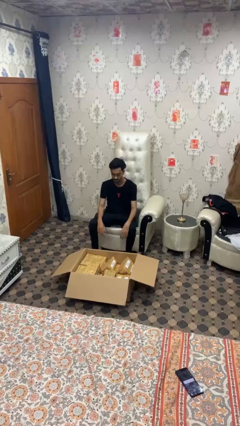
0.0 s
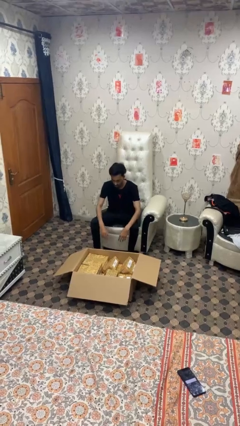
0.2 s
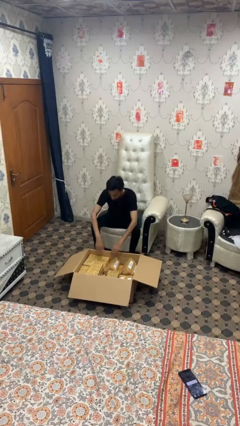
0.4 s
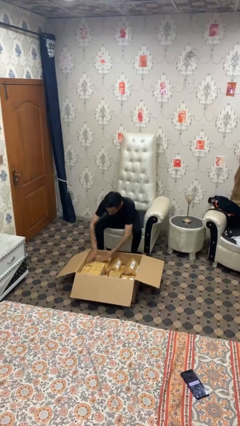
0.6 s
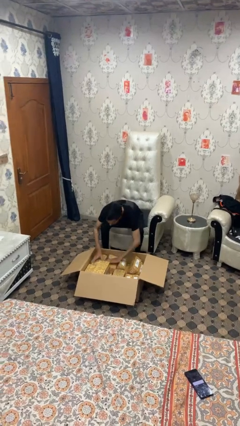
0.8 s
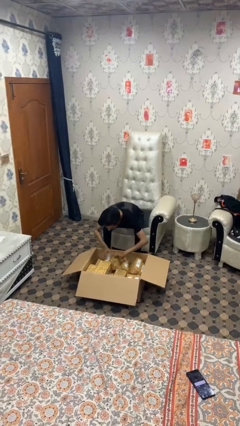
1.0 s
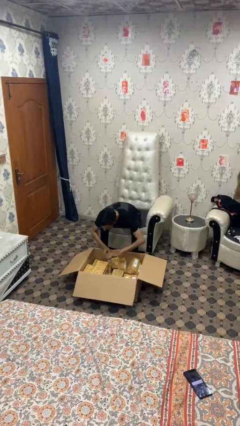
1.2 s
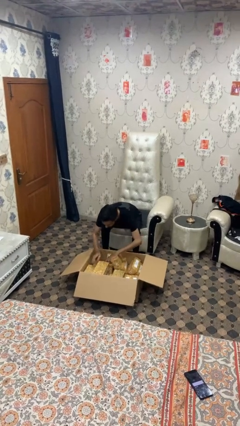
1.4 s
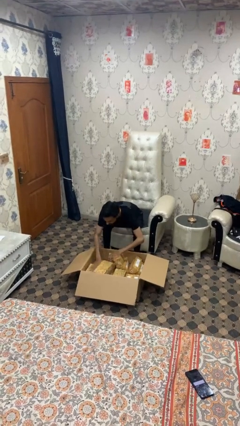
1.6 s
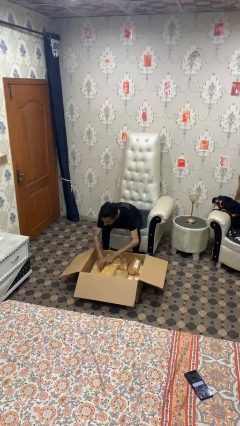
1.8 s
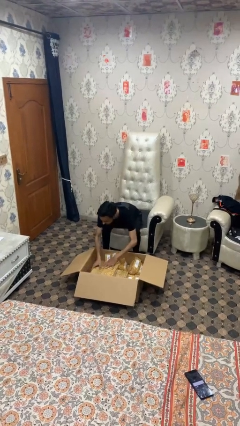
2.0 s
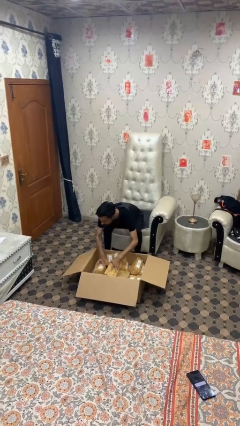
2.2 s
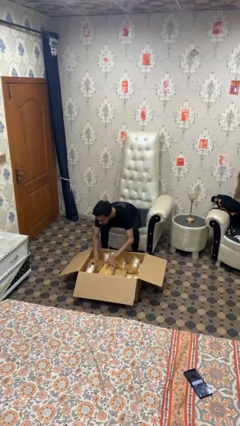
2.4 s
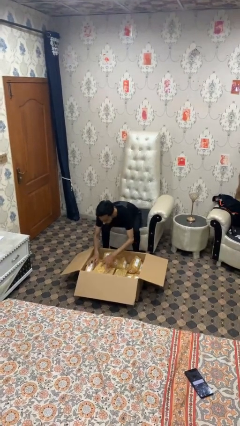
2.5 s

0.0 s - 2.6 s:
person searches in box

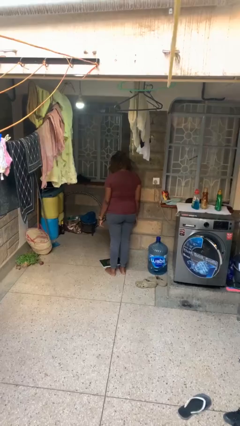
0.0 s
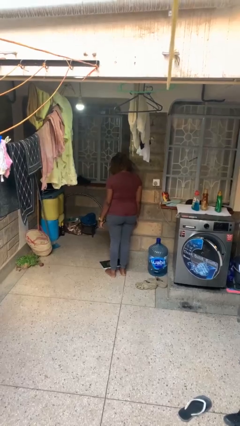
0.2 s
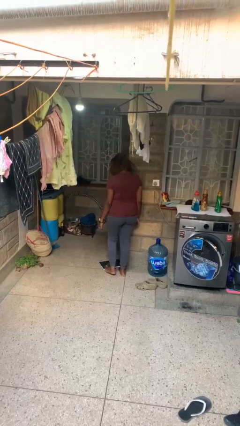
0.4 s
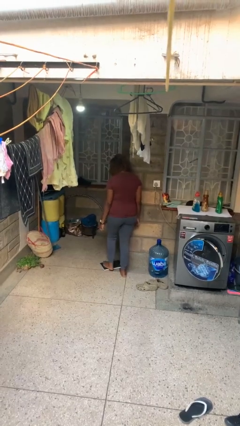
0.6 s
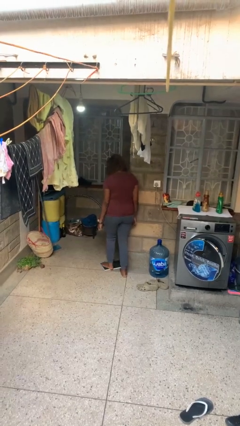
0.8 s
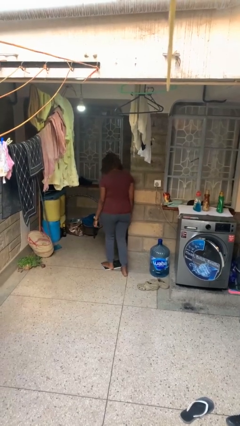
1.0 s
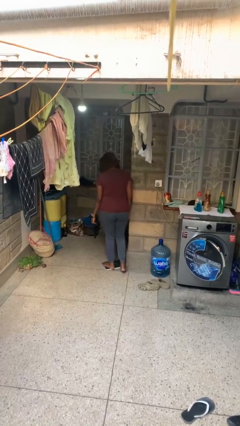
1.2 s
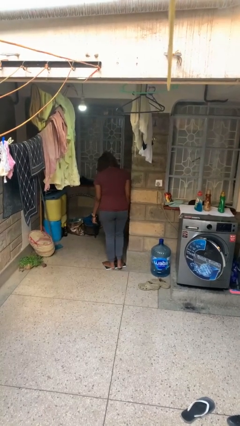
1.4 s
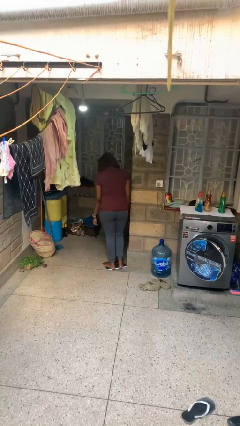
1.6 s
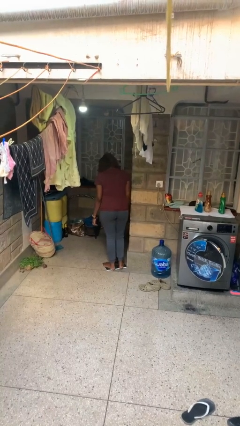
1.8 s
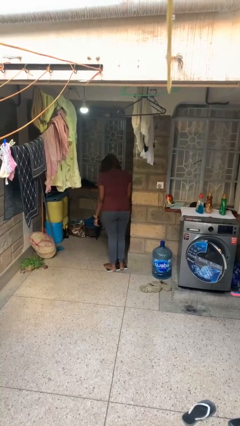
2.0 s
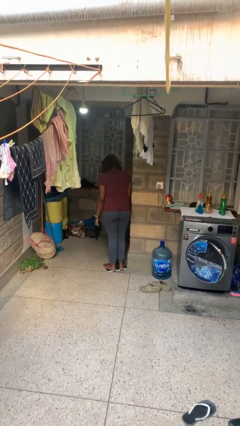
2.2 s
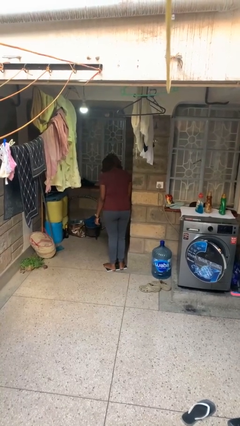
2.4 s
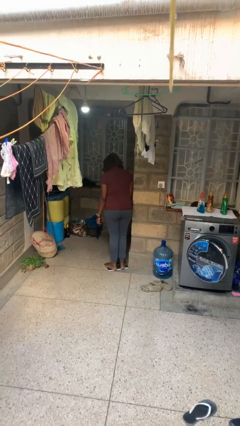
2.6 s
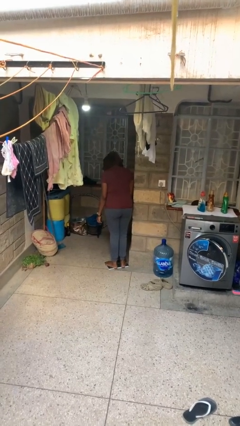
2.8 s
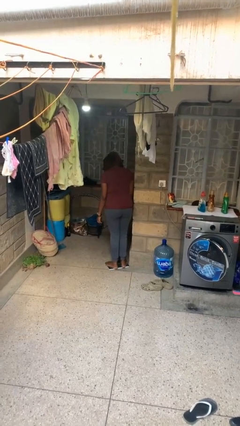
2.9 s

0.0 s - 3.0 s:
person uses bodyweight scale

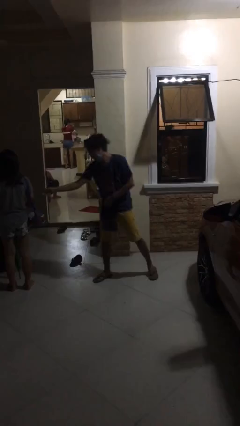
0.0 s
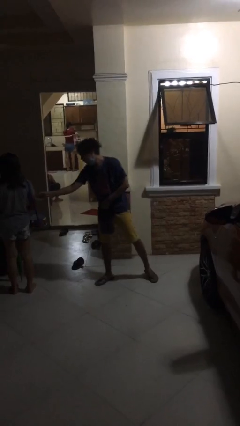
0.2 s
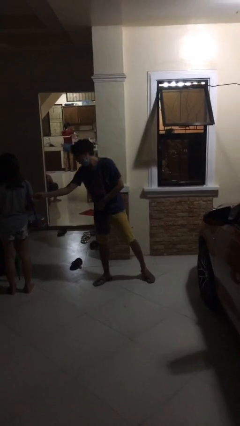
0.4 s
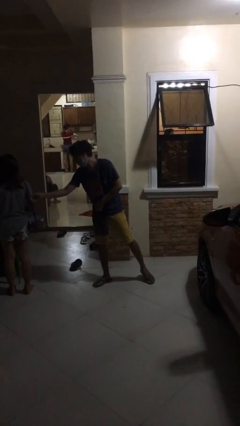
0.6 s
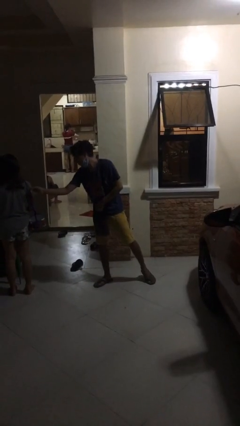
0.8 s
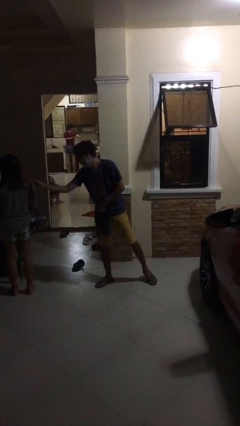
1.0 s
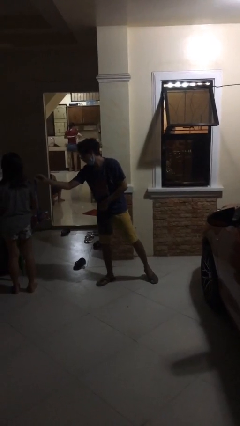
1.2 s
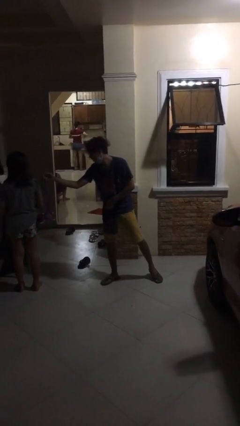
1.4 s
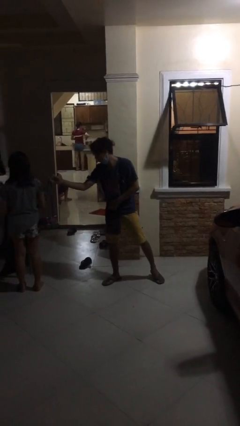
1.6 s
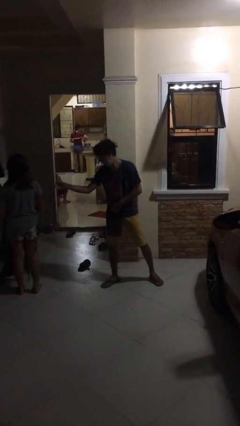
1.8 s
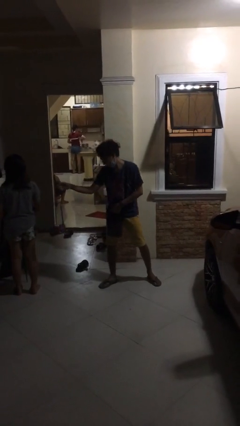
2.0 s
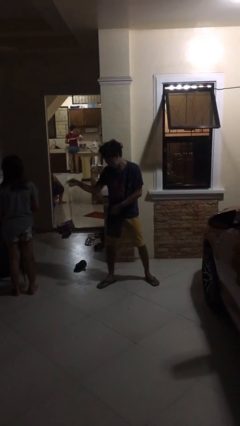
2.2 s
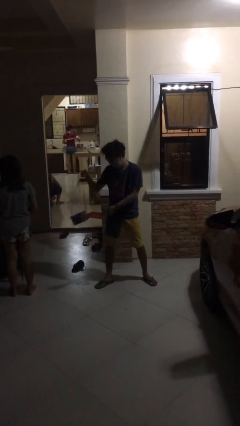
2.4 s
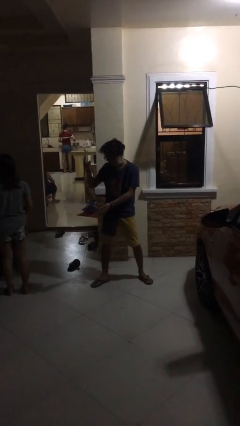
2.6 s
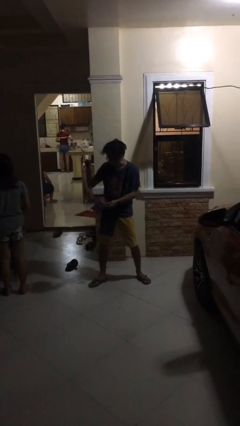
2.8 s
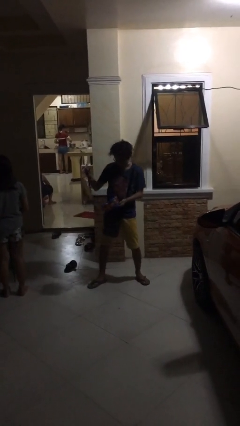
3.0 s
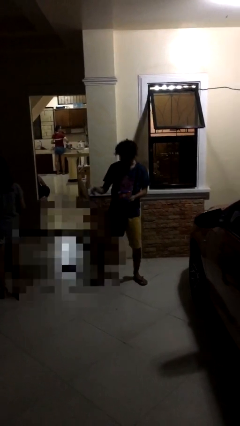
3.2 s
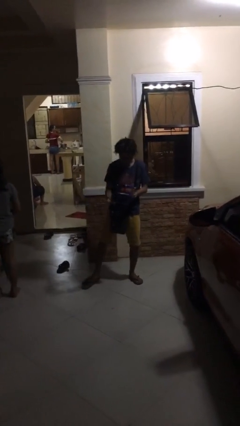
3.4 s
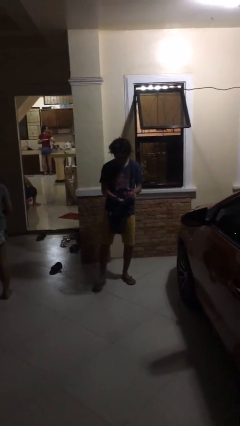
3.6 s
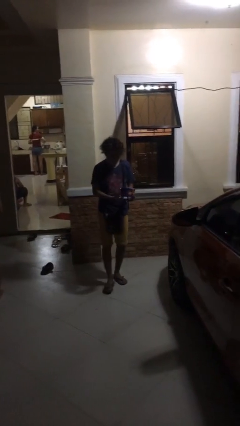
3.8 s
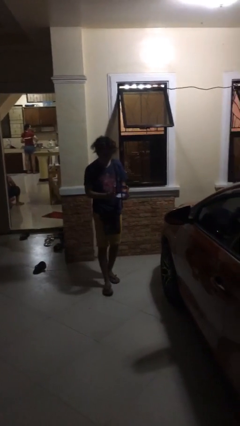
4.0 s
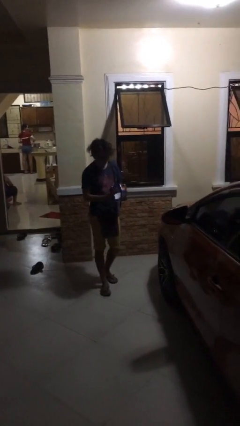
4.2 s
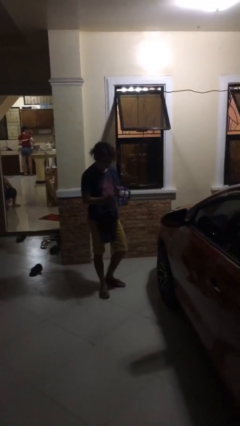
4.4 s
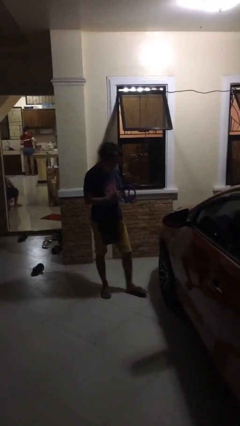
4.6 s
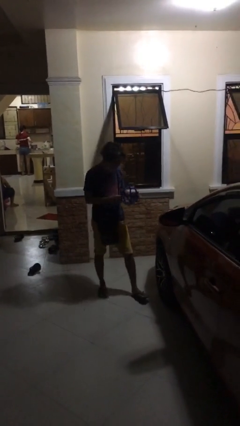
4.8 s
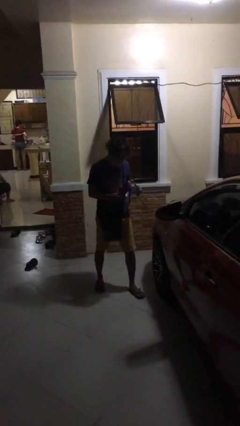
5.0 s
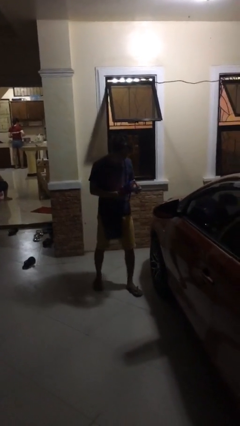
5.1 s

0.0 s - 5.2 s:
person steals object from person

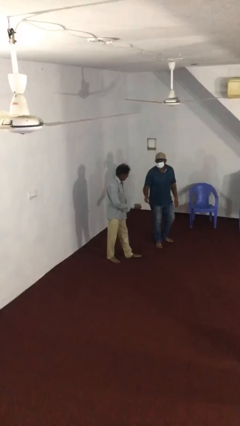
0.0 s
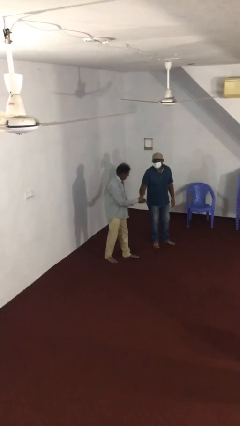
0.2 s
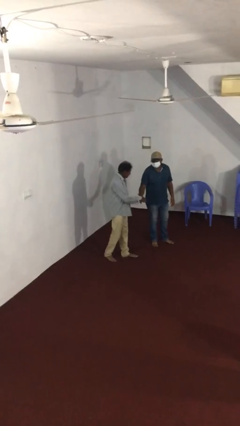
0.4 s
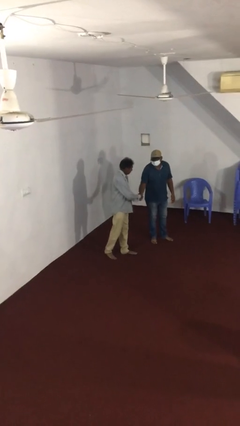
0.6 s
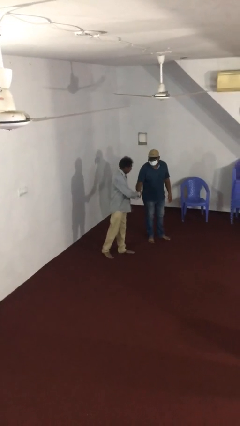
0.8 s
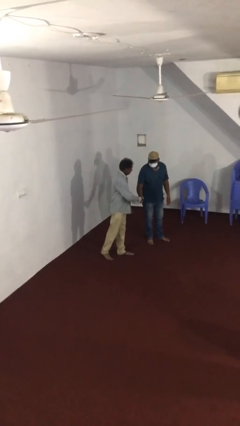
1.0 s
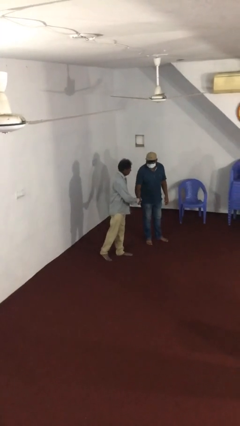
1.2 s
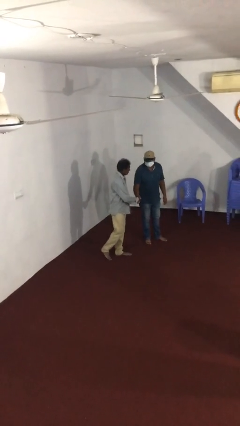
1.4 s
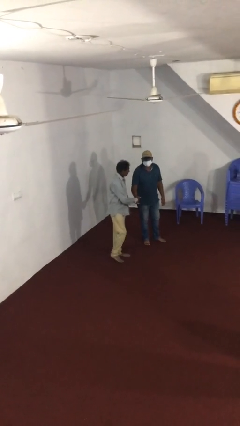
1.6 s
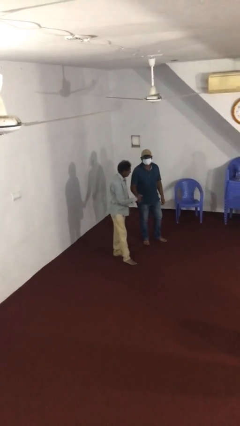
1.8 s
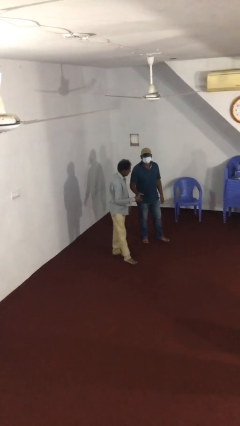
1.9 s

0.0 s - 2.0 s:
person shakes hand

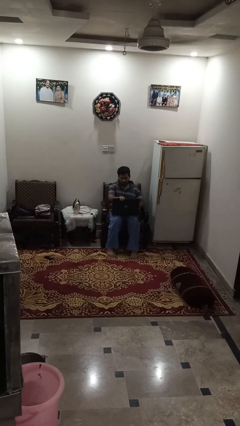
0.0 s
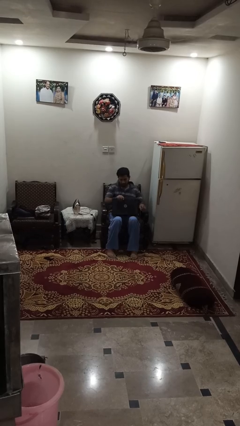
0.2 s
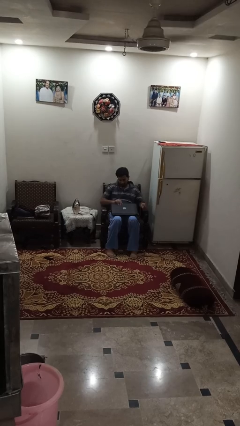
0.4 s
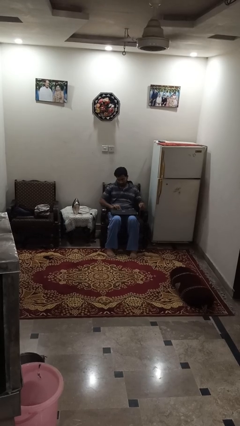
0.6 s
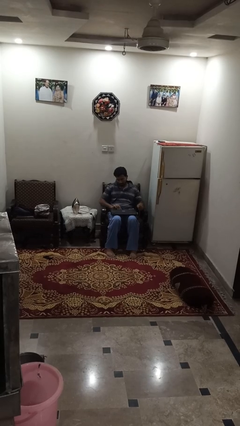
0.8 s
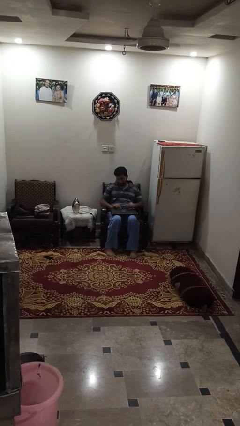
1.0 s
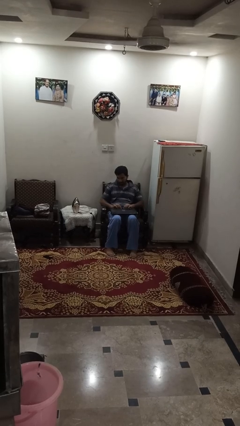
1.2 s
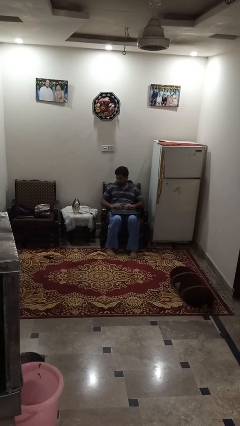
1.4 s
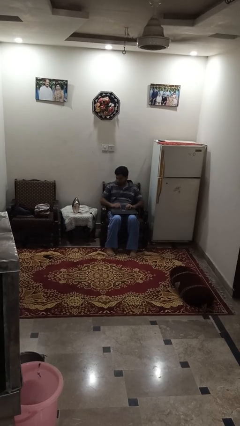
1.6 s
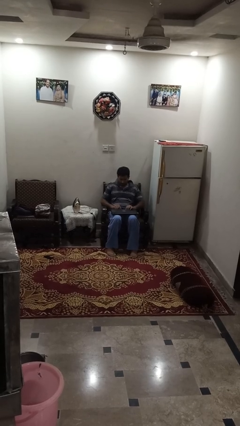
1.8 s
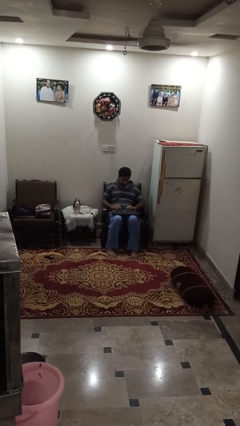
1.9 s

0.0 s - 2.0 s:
person closes laptop

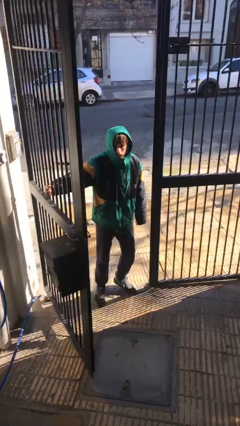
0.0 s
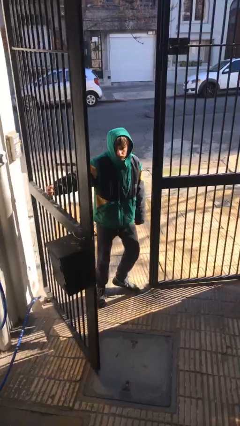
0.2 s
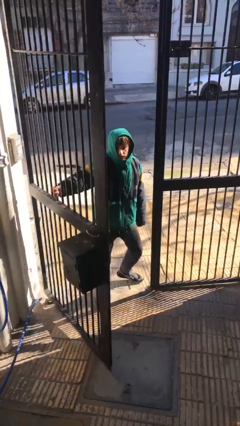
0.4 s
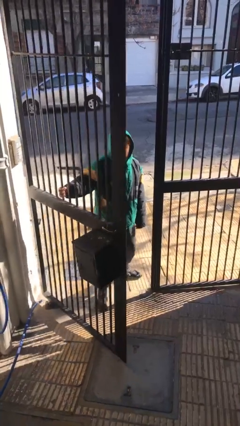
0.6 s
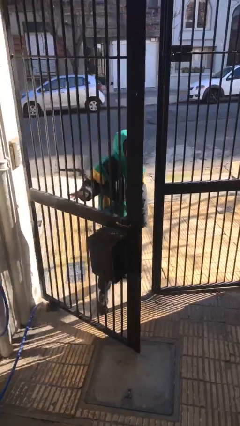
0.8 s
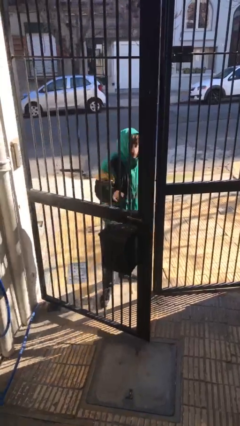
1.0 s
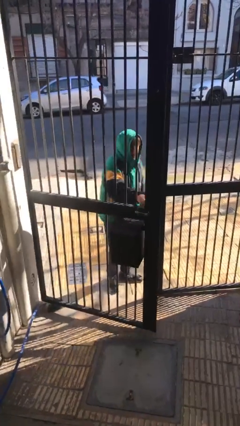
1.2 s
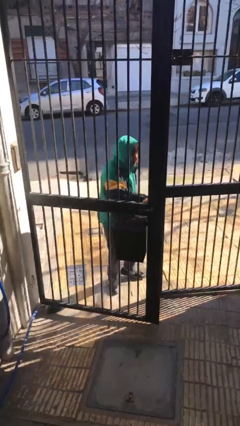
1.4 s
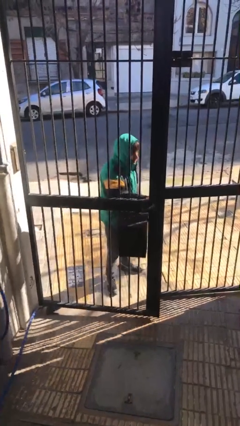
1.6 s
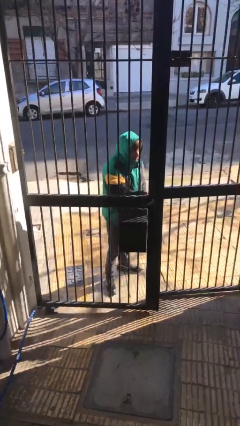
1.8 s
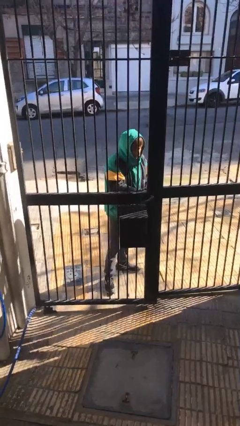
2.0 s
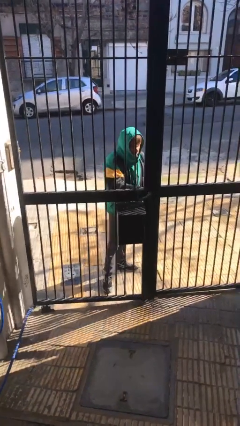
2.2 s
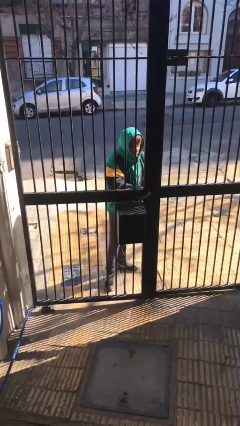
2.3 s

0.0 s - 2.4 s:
person closes gate

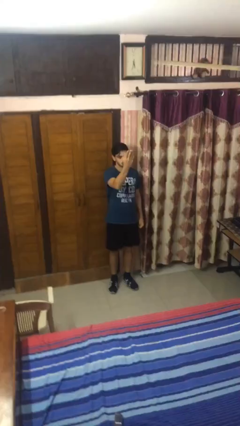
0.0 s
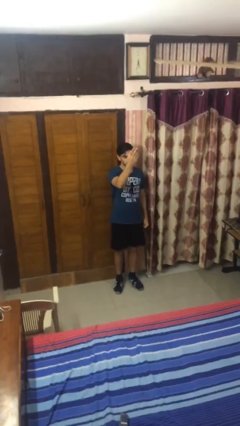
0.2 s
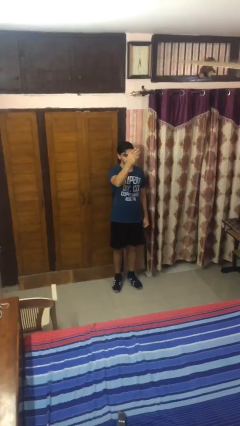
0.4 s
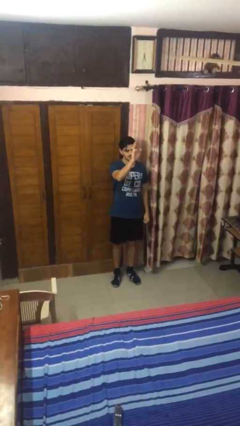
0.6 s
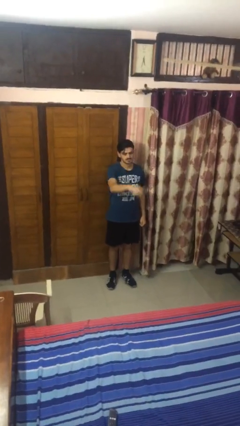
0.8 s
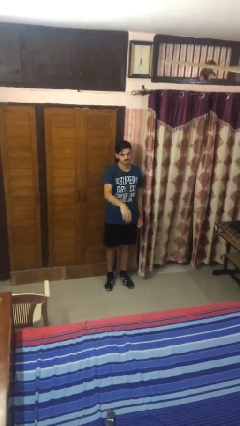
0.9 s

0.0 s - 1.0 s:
person gestures swipe down
